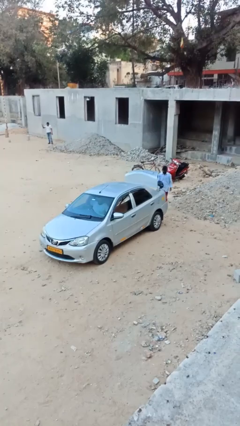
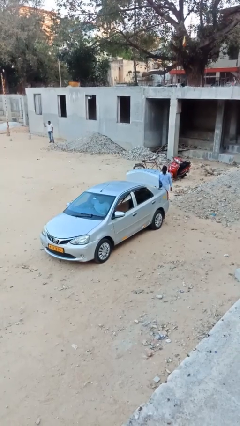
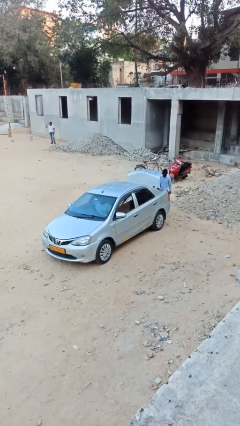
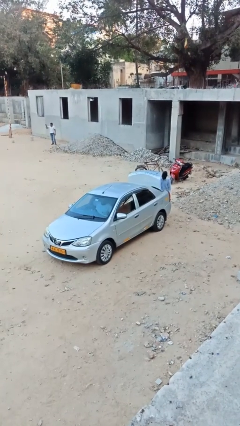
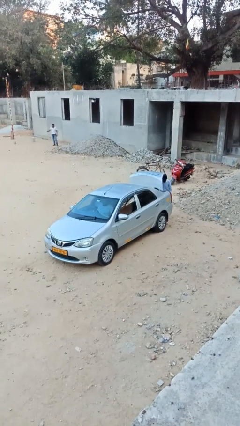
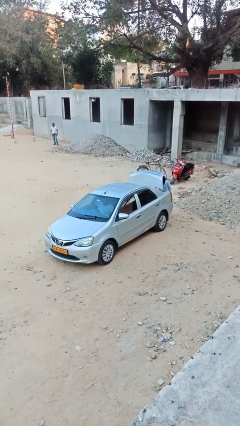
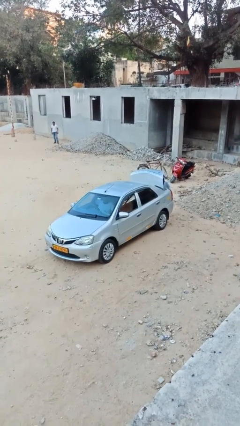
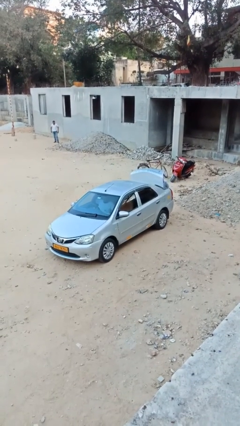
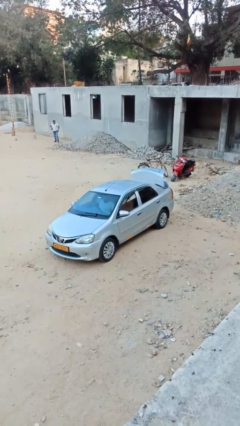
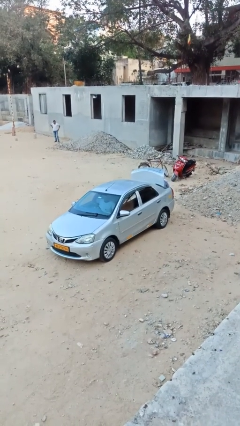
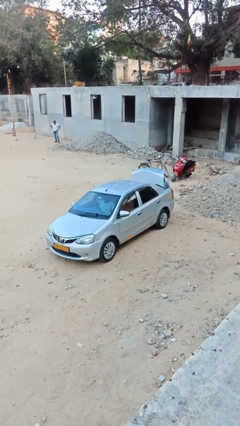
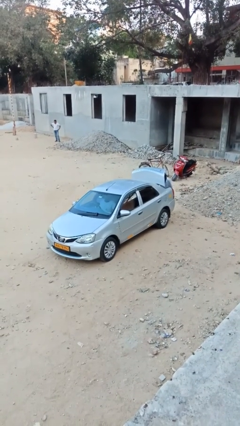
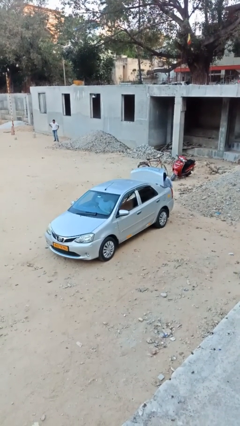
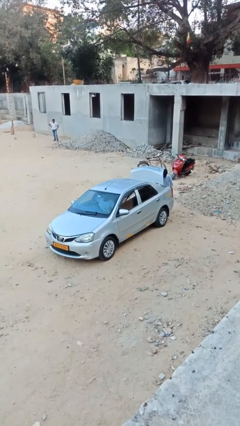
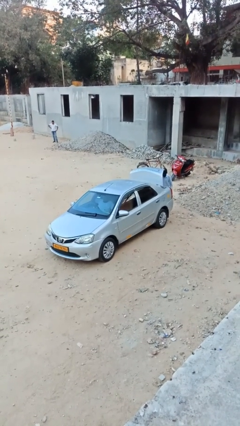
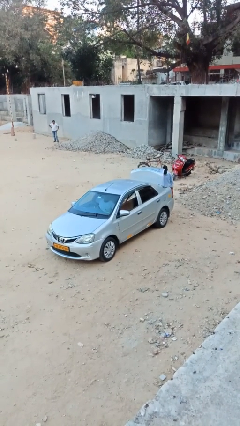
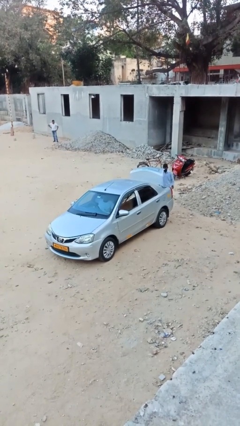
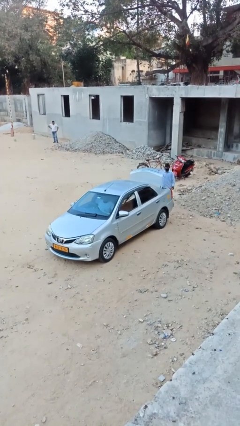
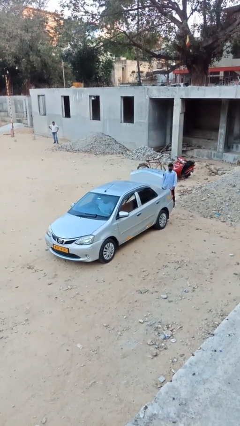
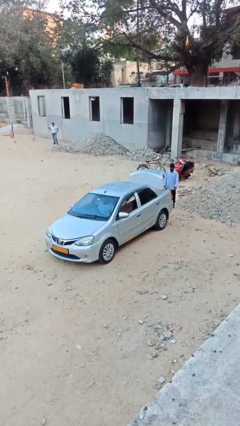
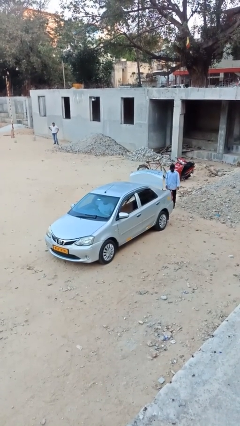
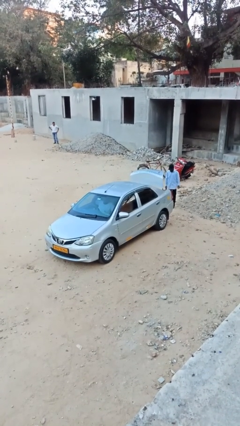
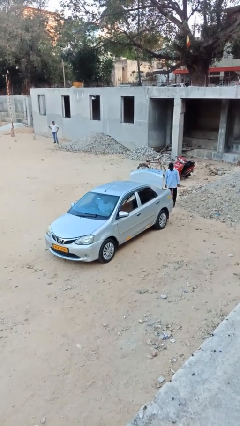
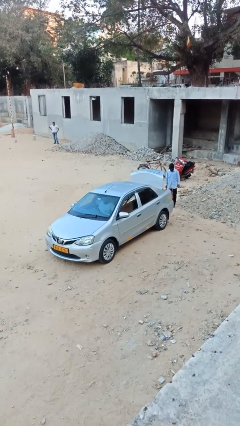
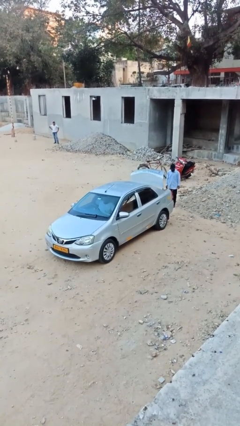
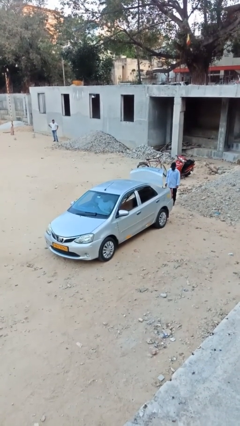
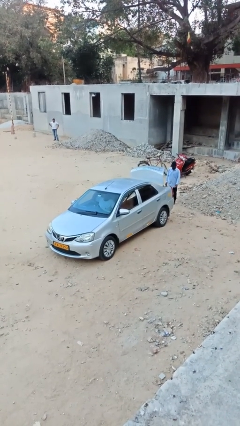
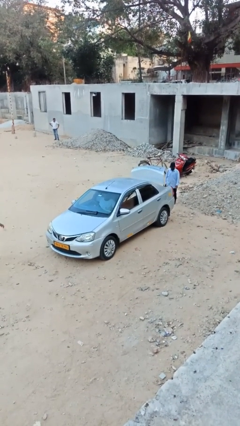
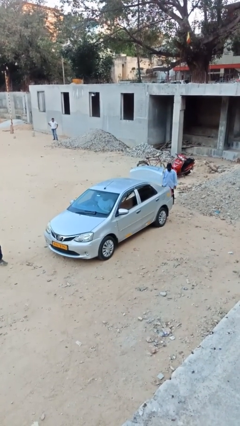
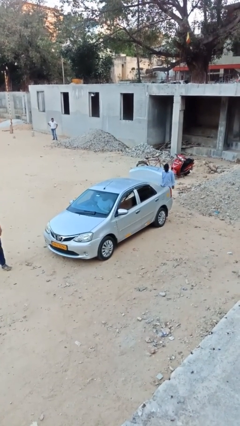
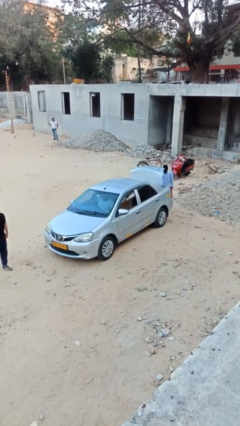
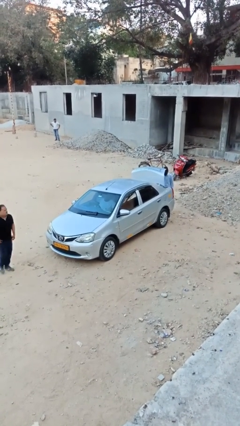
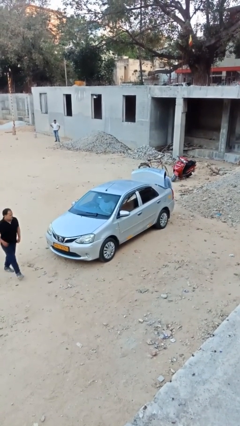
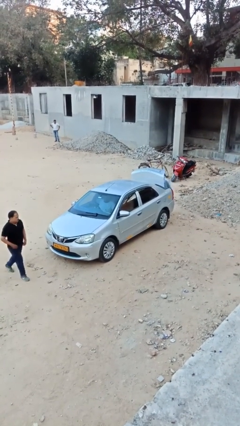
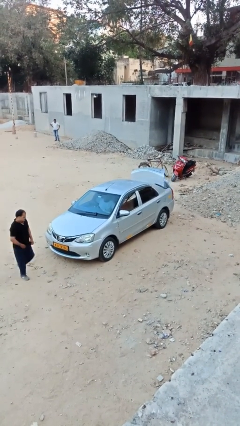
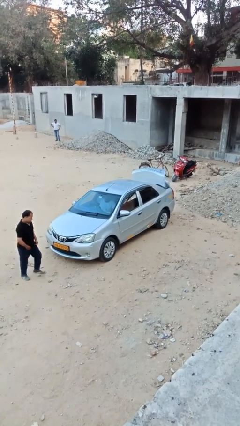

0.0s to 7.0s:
person loads car

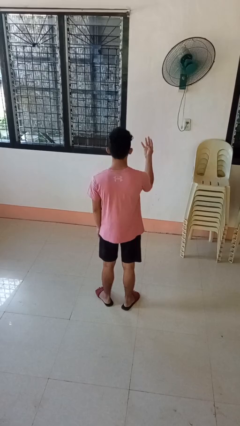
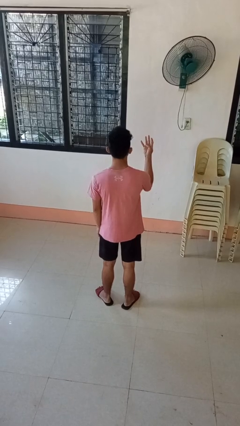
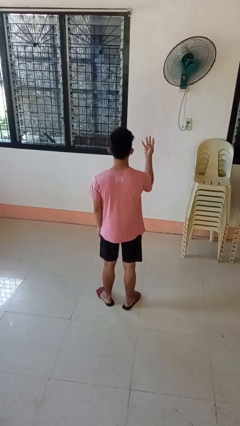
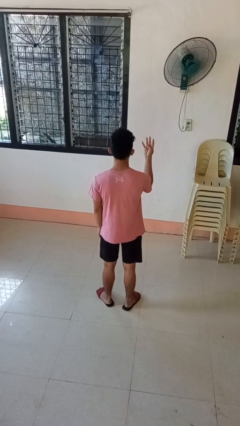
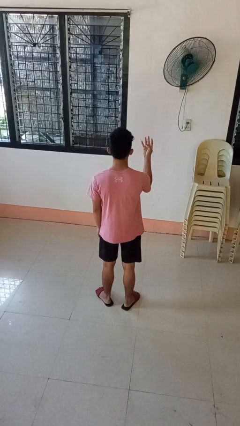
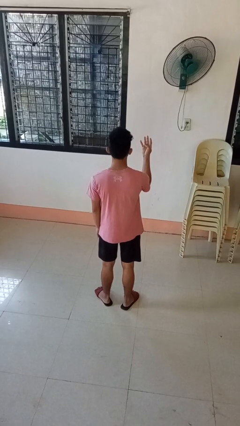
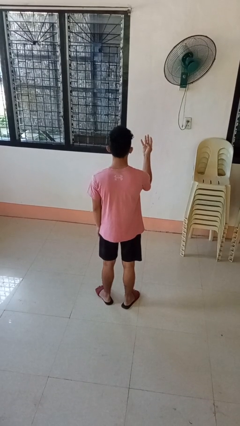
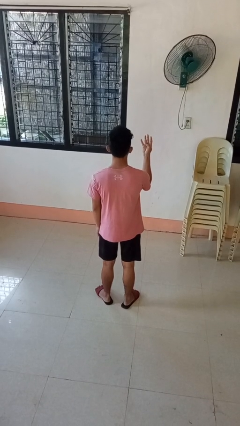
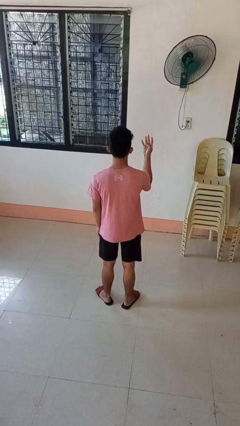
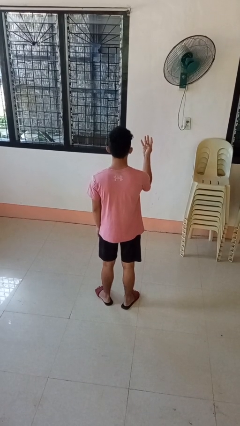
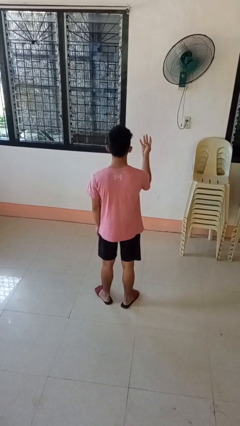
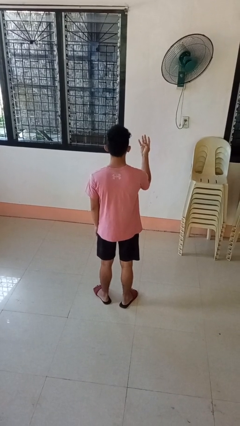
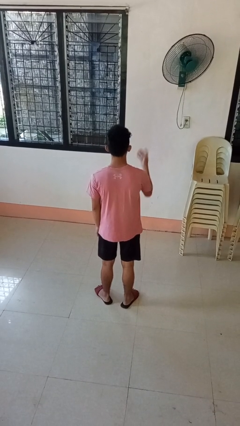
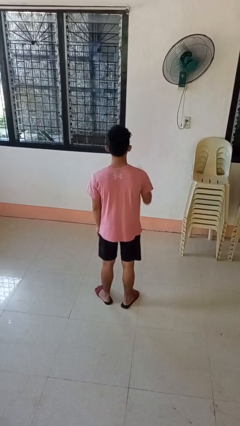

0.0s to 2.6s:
person gestures number four

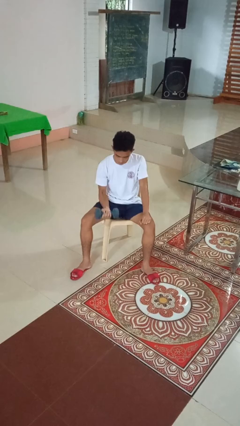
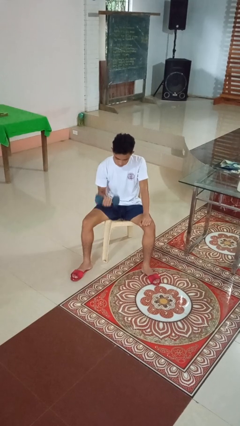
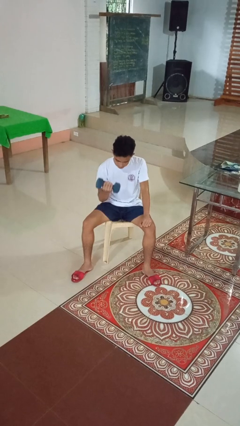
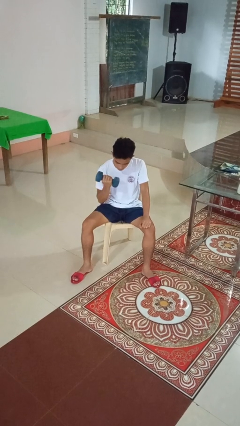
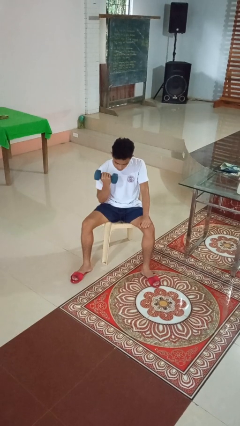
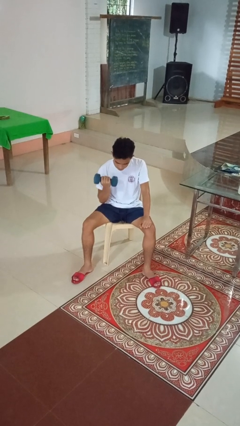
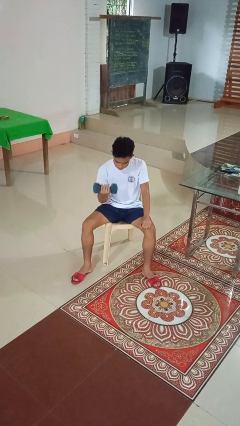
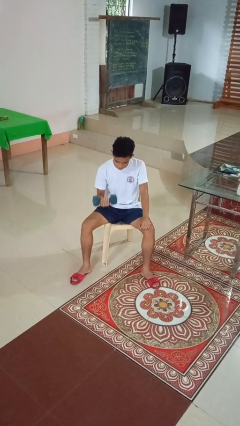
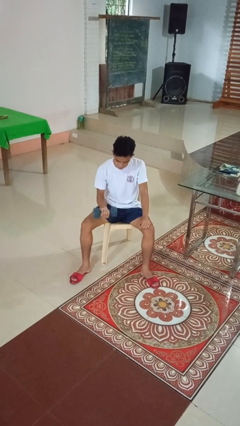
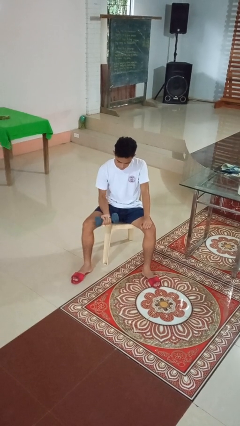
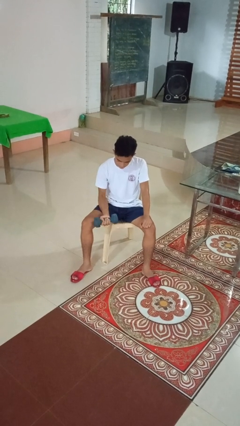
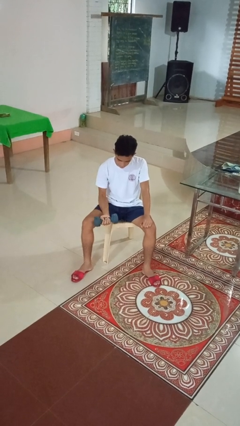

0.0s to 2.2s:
person lifts dumbbells

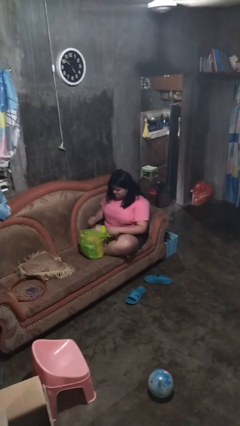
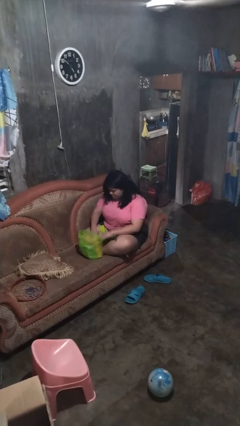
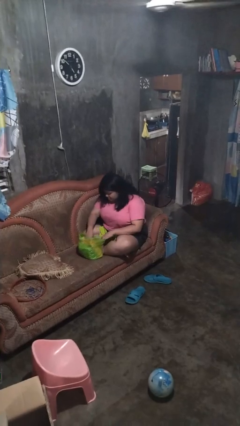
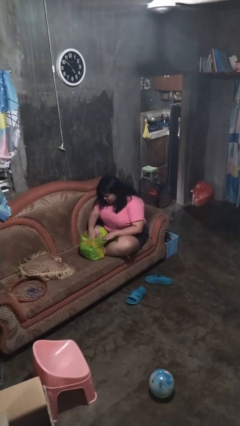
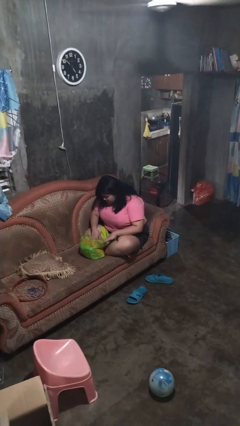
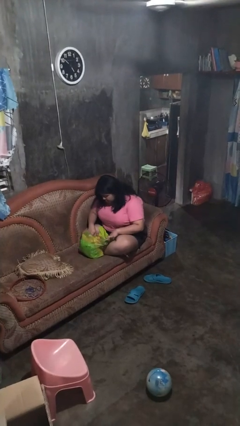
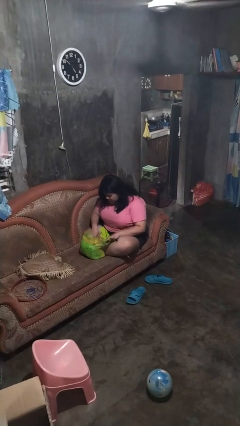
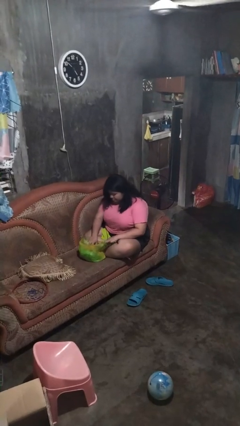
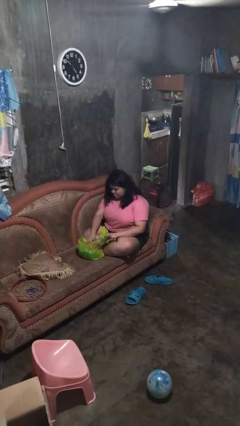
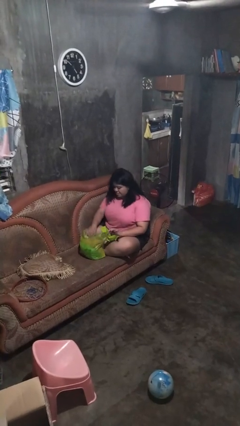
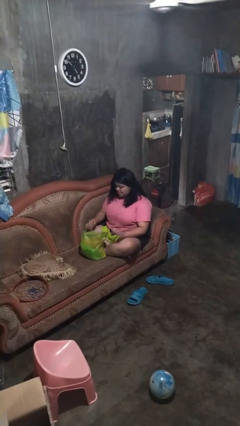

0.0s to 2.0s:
person searches in bag

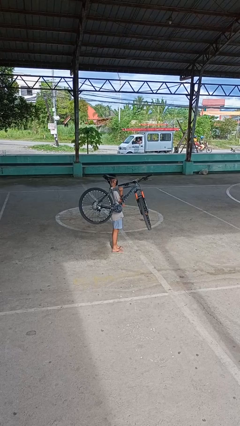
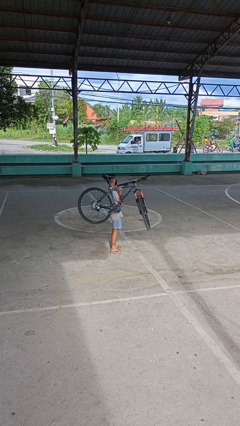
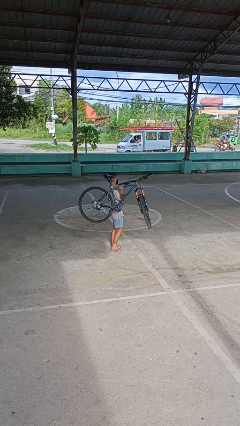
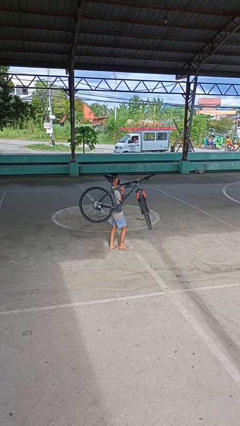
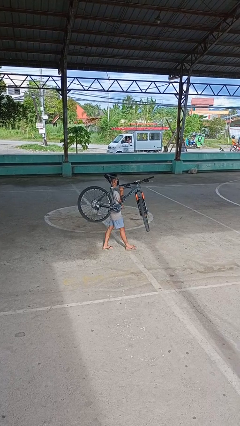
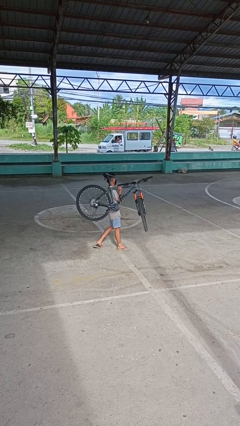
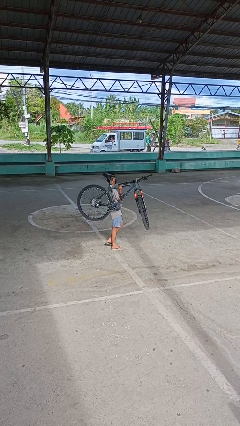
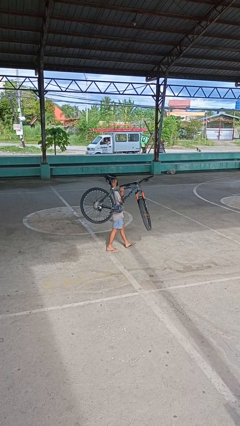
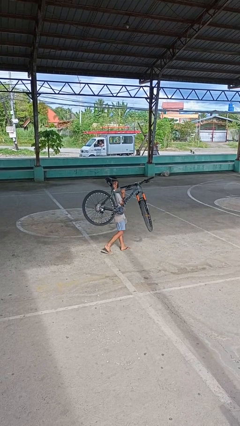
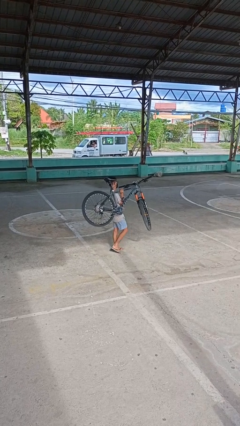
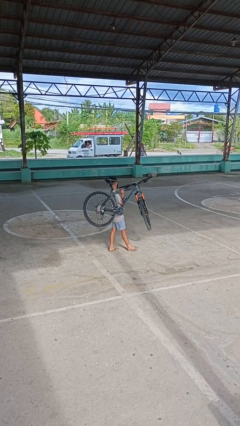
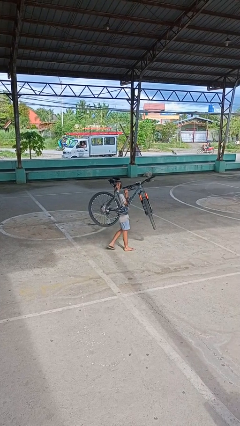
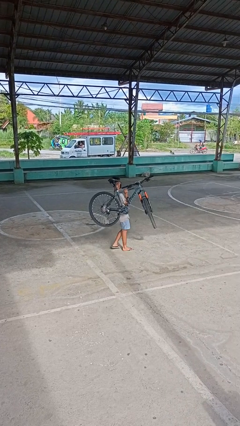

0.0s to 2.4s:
person carries bicycle

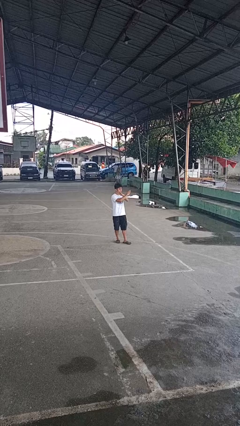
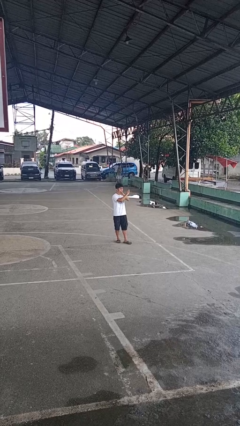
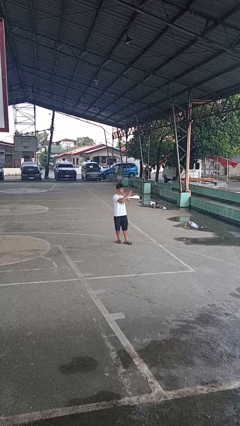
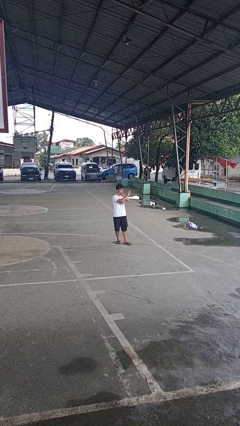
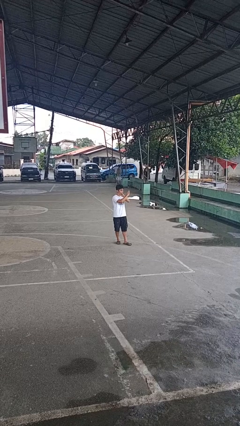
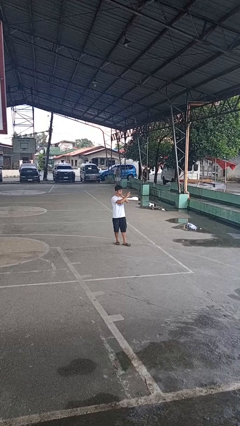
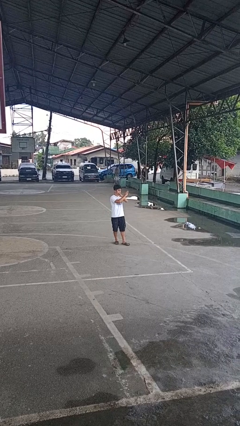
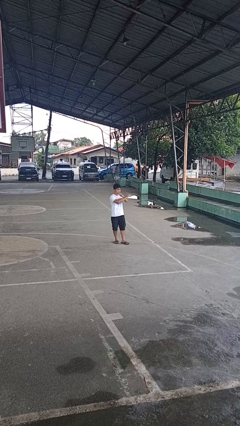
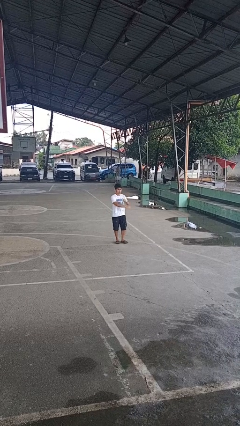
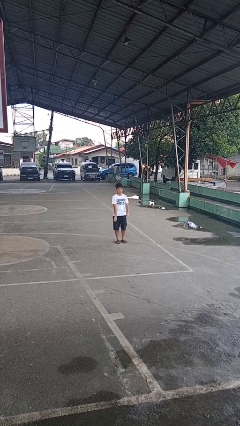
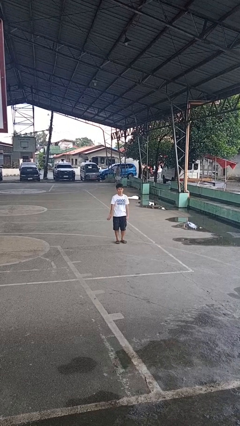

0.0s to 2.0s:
person gestures arms x
